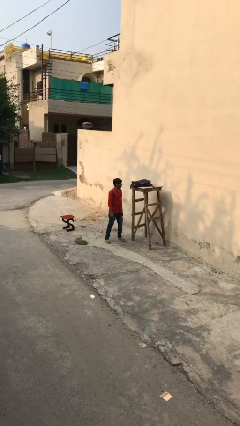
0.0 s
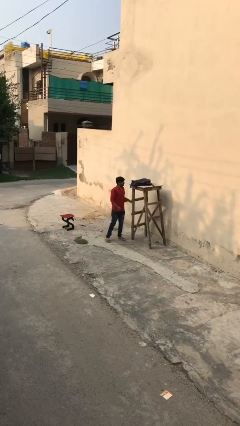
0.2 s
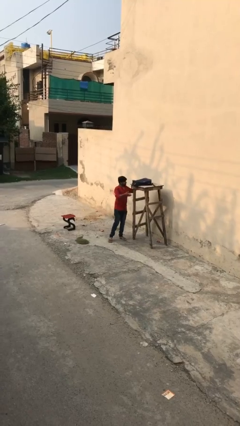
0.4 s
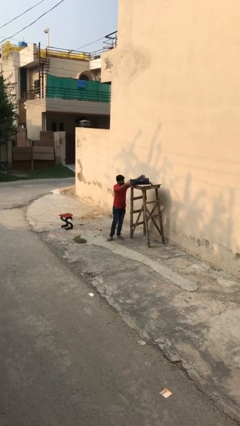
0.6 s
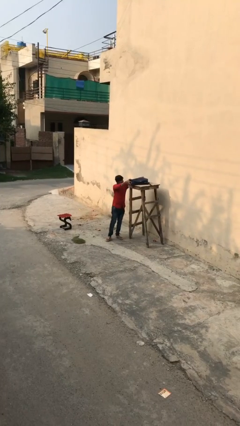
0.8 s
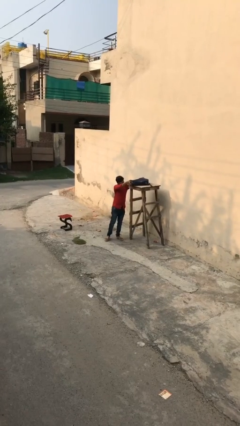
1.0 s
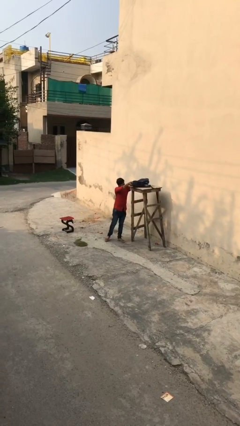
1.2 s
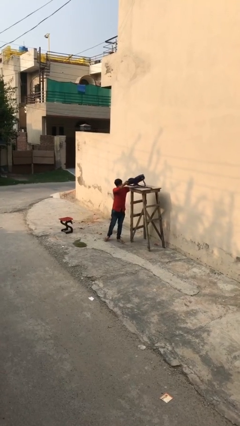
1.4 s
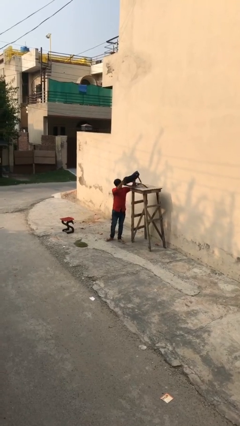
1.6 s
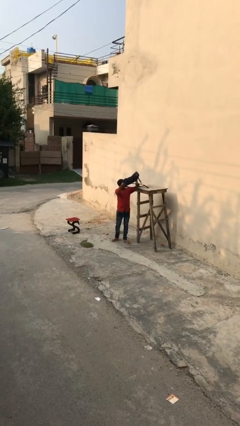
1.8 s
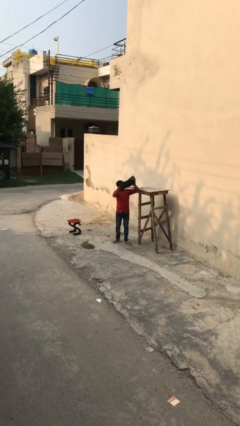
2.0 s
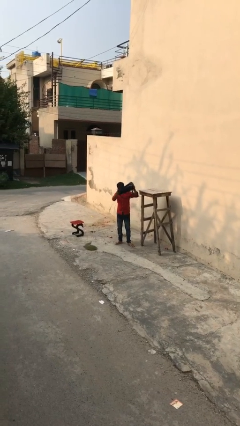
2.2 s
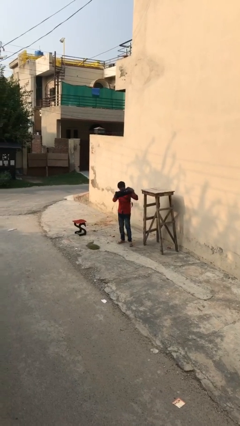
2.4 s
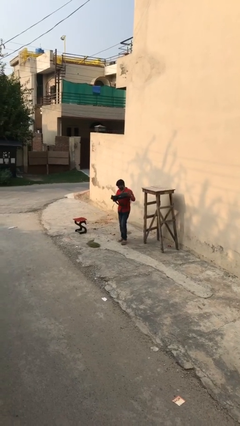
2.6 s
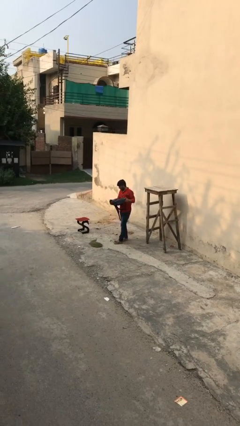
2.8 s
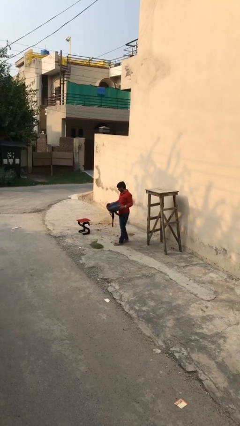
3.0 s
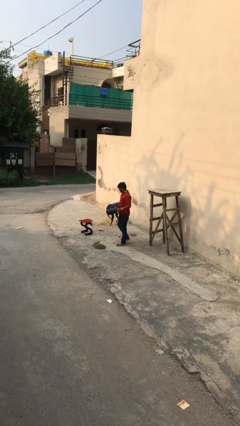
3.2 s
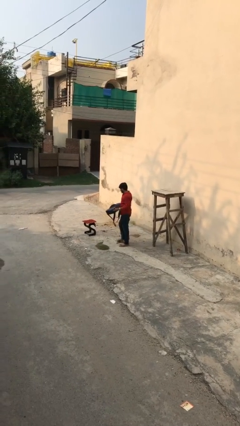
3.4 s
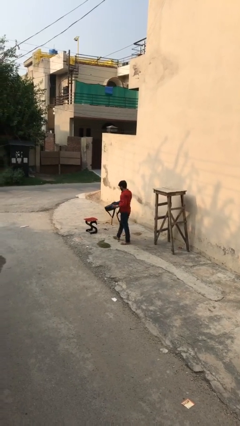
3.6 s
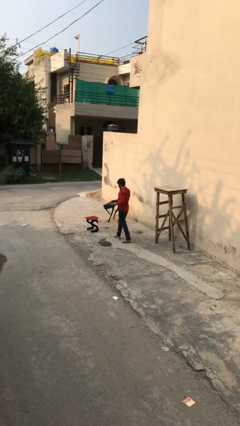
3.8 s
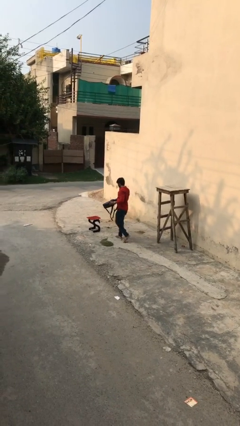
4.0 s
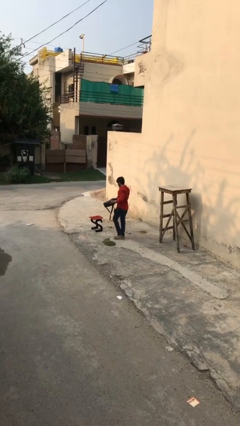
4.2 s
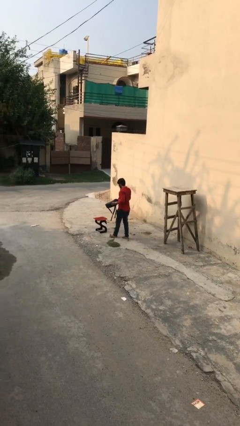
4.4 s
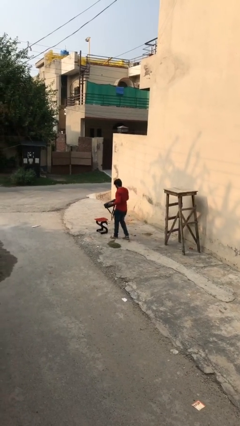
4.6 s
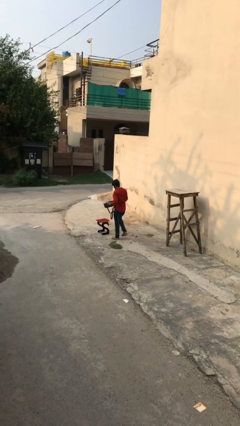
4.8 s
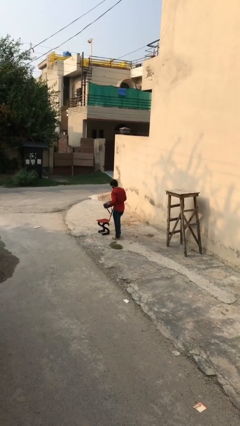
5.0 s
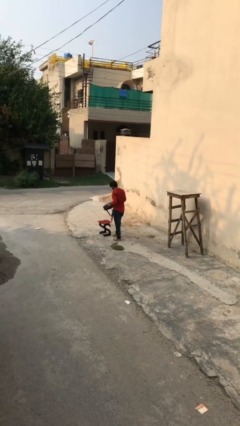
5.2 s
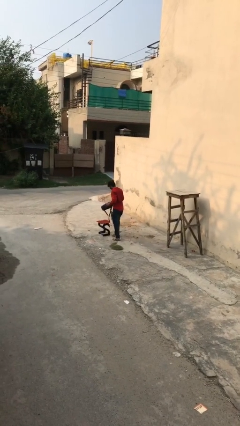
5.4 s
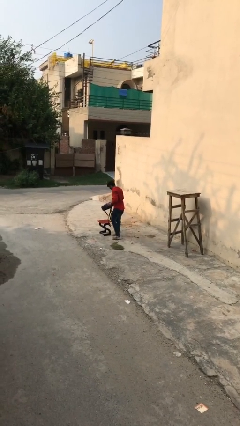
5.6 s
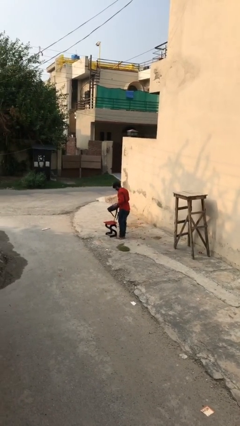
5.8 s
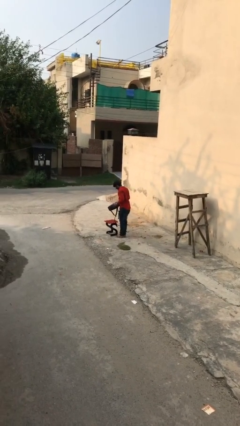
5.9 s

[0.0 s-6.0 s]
person picks up object from shelf

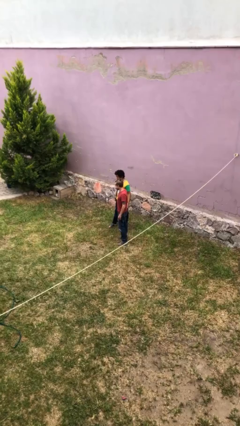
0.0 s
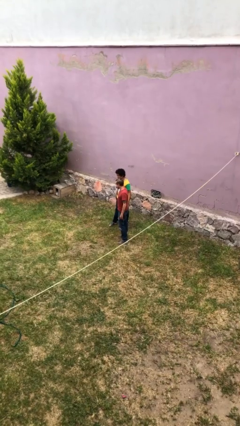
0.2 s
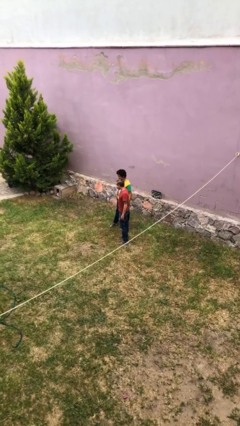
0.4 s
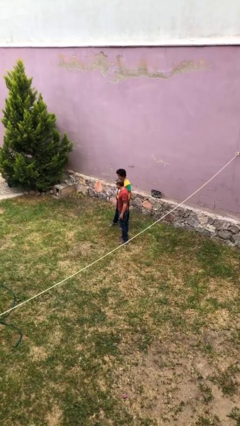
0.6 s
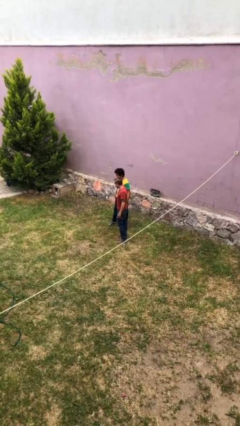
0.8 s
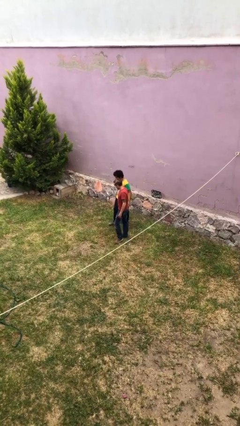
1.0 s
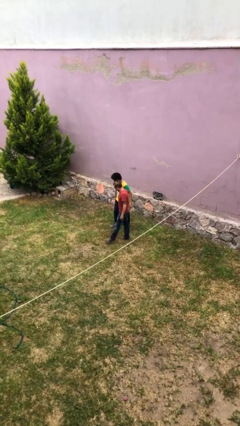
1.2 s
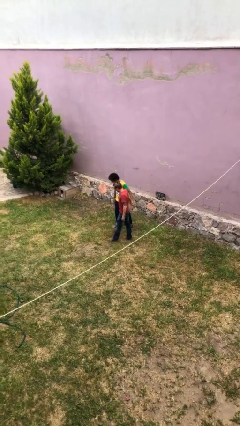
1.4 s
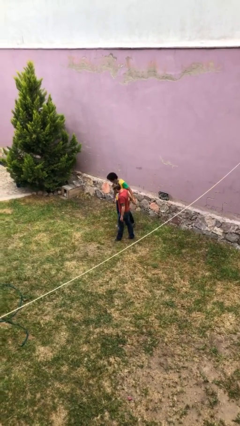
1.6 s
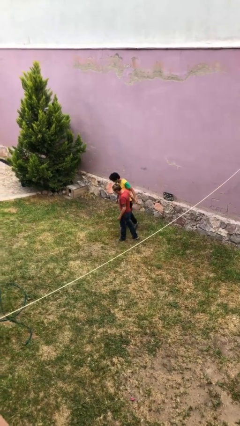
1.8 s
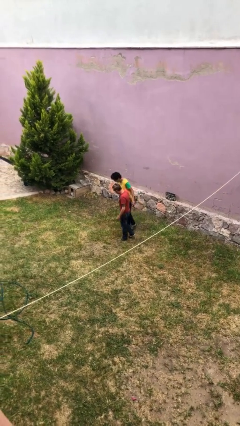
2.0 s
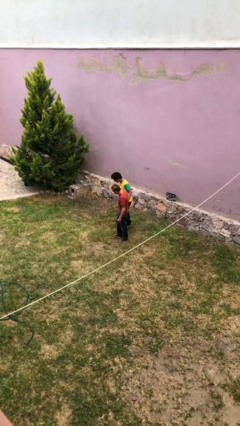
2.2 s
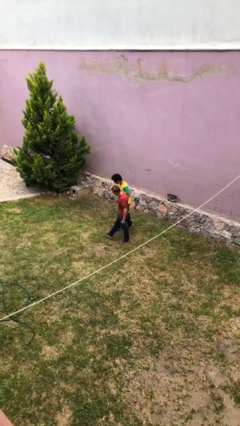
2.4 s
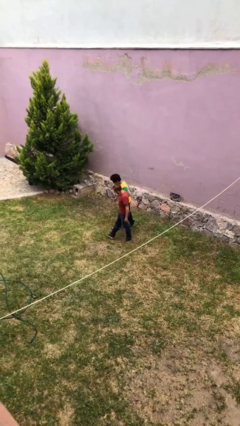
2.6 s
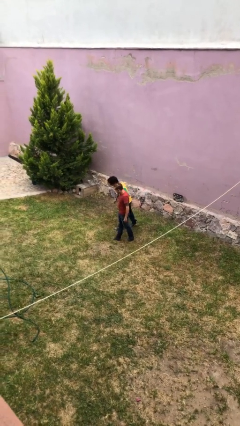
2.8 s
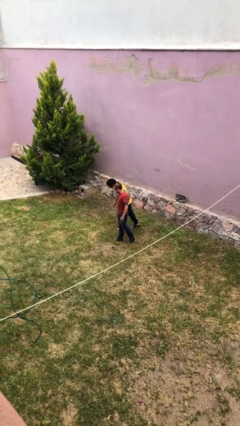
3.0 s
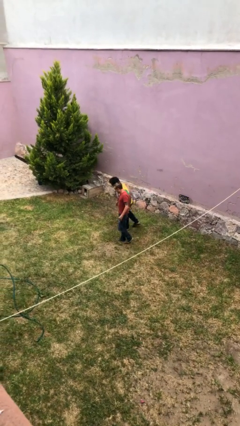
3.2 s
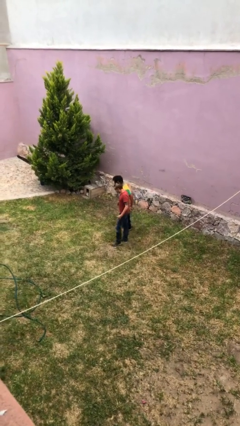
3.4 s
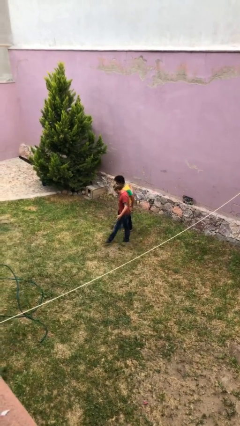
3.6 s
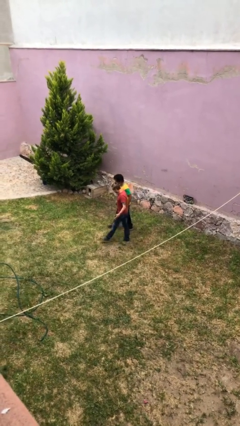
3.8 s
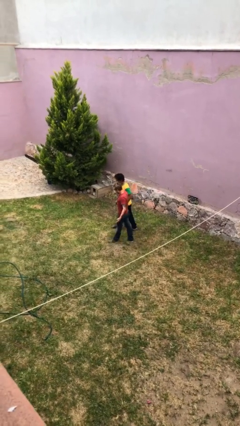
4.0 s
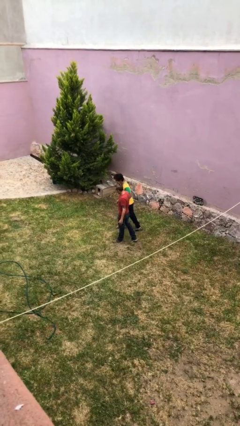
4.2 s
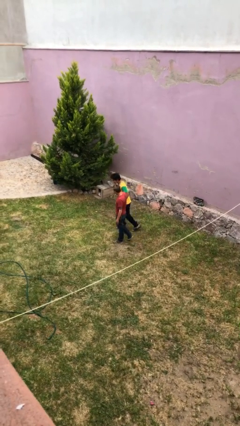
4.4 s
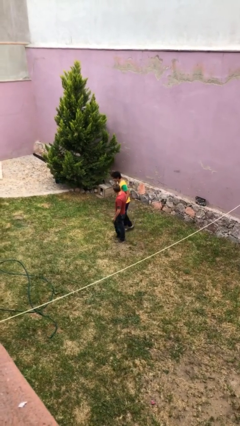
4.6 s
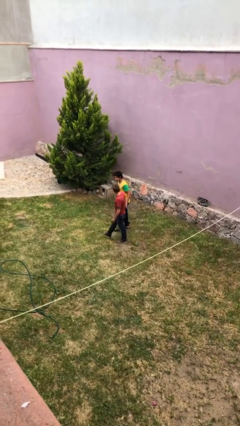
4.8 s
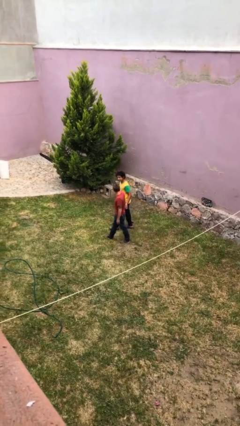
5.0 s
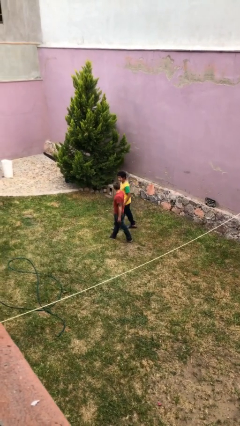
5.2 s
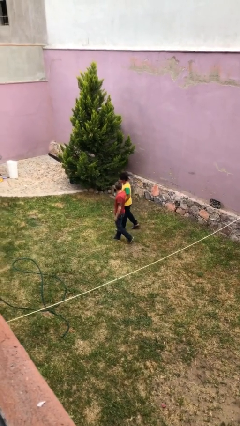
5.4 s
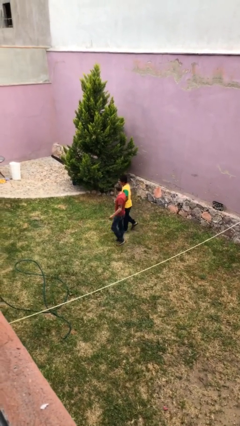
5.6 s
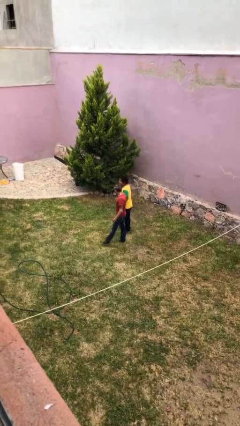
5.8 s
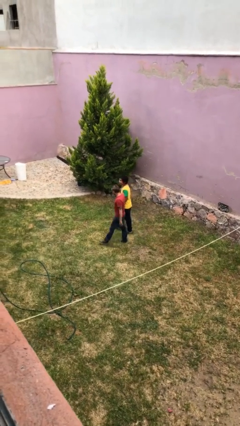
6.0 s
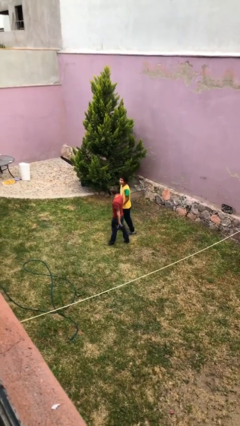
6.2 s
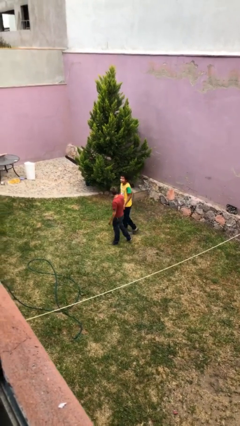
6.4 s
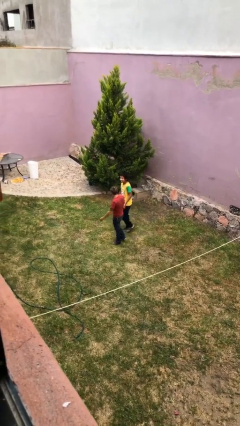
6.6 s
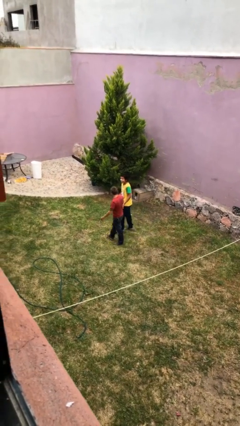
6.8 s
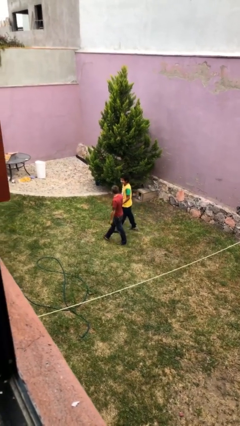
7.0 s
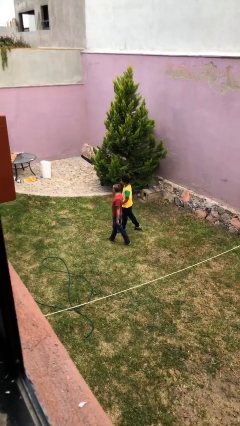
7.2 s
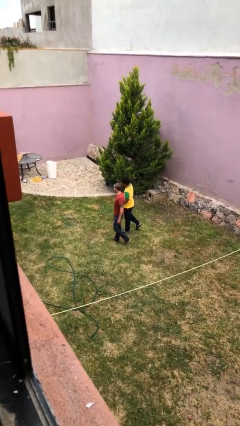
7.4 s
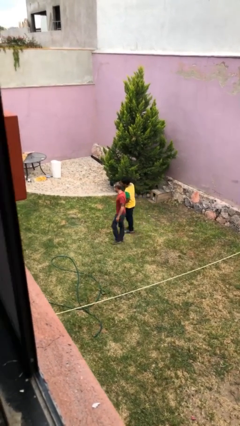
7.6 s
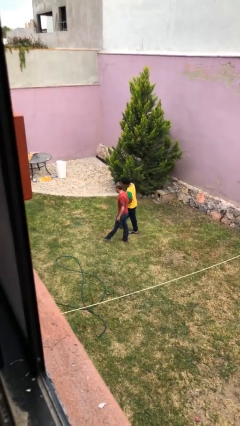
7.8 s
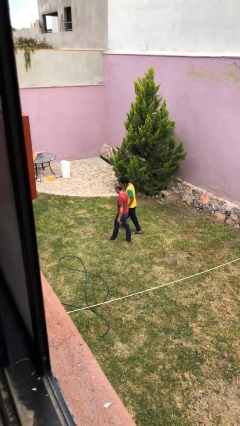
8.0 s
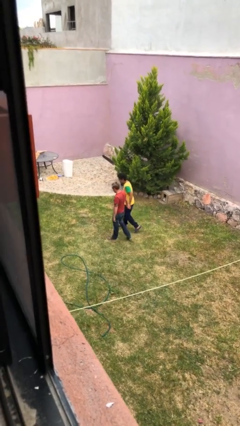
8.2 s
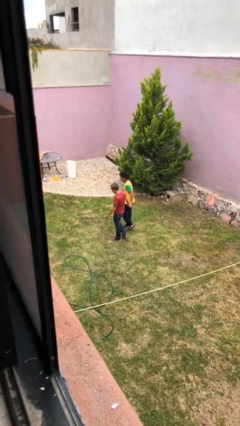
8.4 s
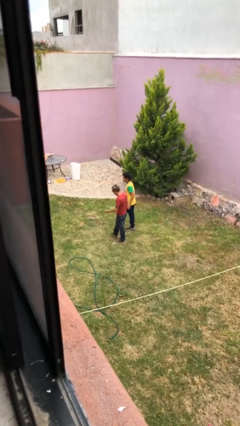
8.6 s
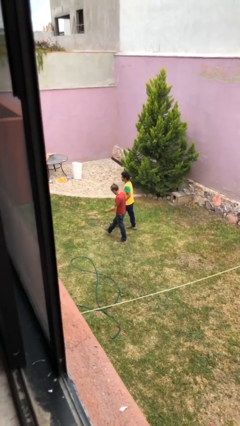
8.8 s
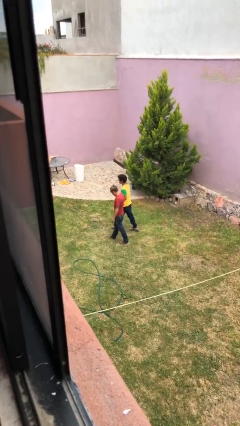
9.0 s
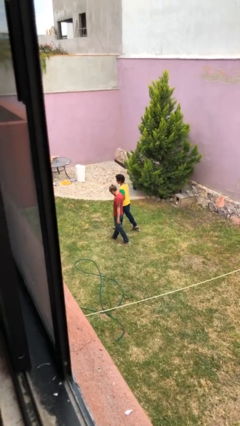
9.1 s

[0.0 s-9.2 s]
person holds hand

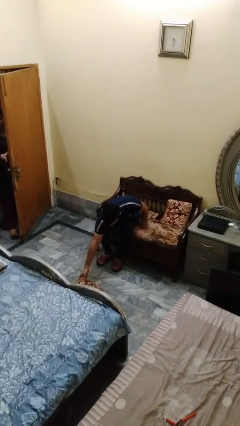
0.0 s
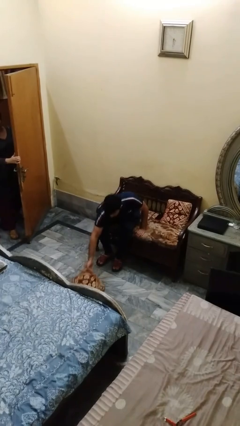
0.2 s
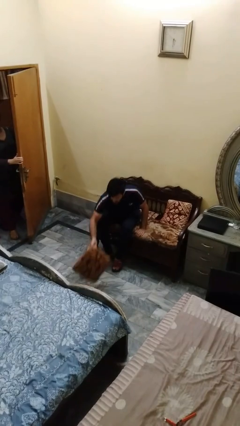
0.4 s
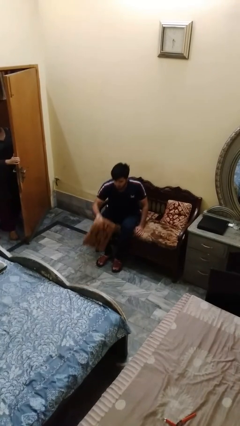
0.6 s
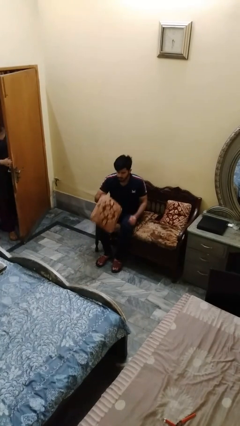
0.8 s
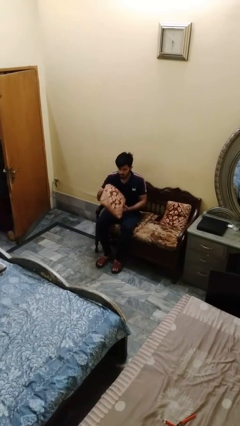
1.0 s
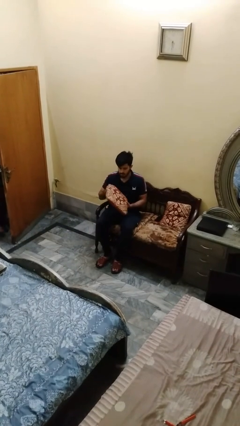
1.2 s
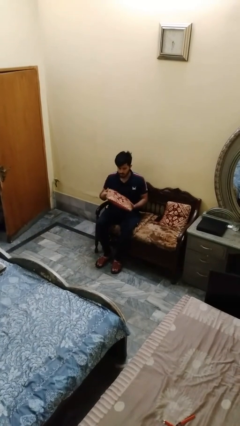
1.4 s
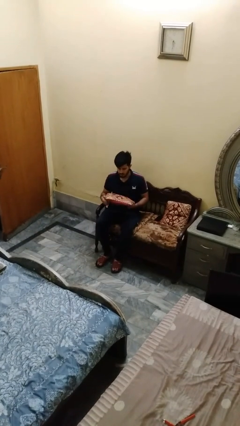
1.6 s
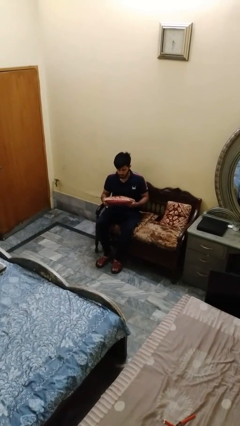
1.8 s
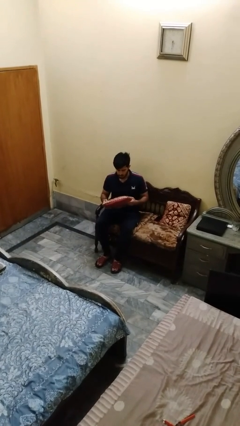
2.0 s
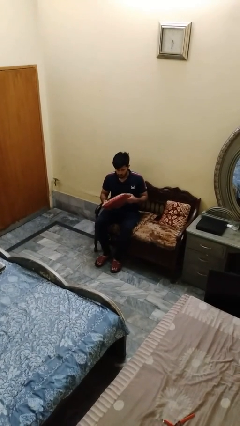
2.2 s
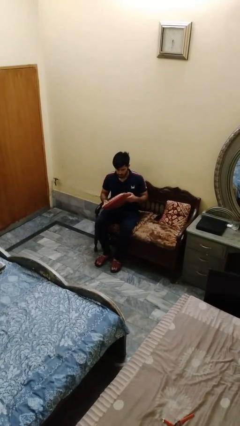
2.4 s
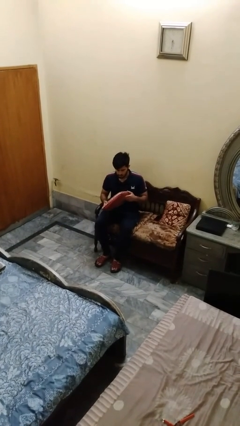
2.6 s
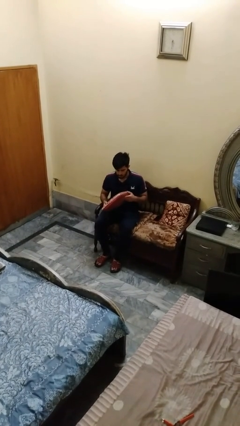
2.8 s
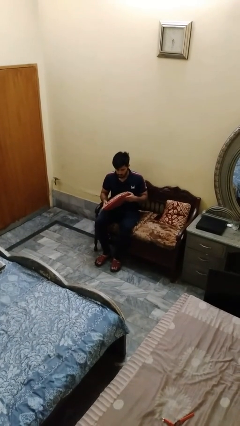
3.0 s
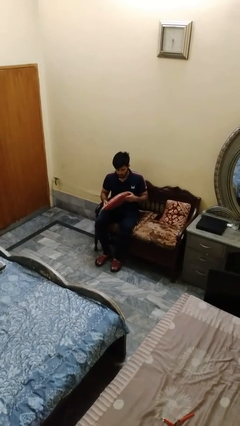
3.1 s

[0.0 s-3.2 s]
person picks up object from floor
